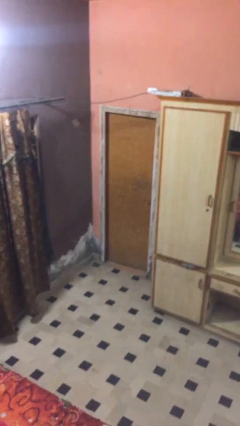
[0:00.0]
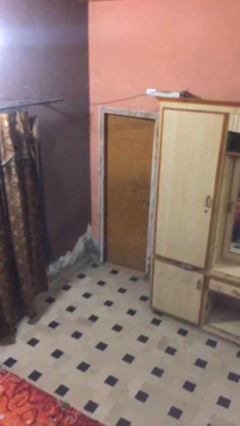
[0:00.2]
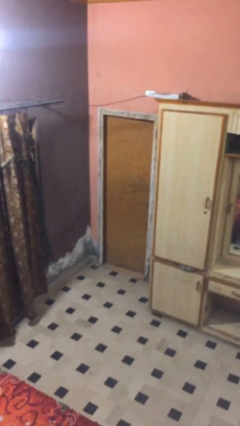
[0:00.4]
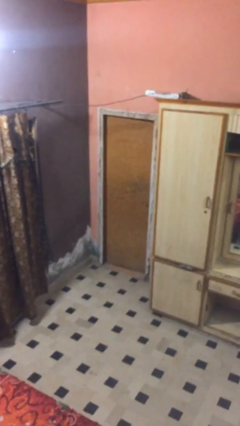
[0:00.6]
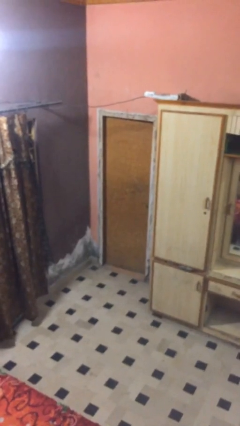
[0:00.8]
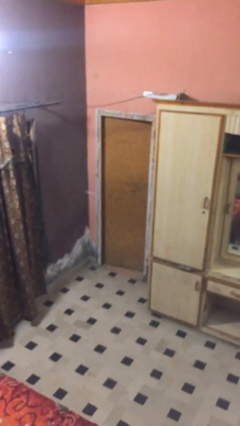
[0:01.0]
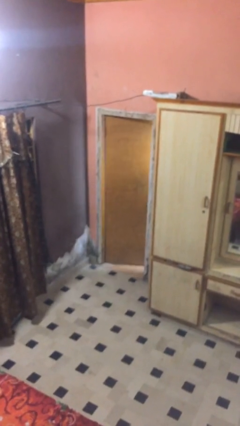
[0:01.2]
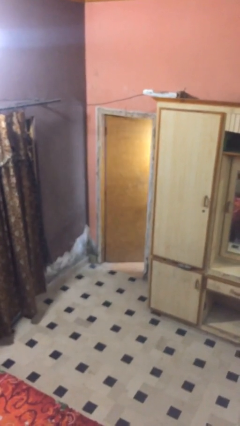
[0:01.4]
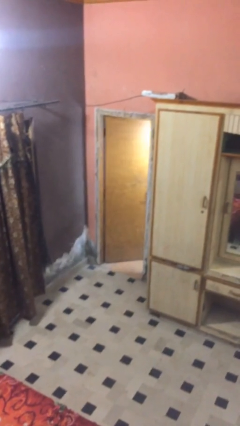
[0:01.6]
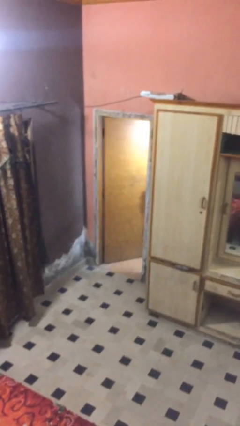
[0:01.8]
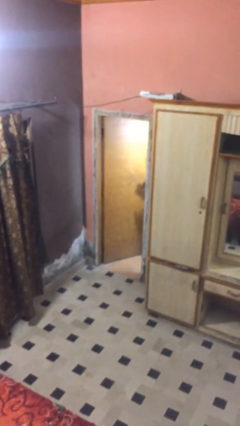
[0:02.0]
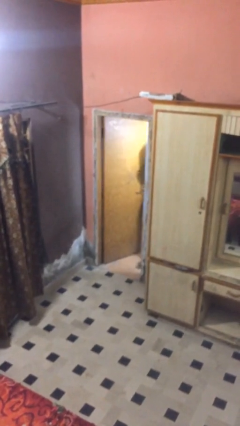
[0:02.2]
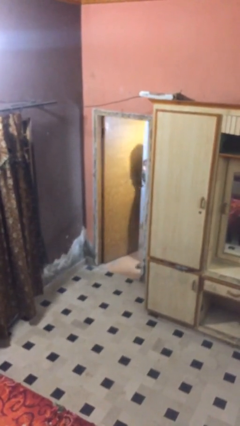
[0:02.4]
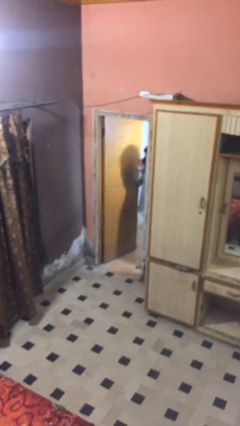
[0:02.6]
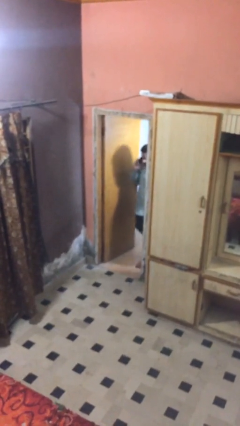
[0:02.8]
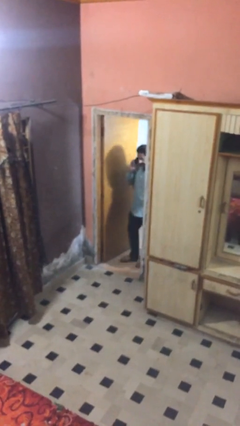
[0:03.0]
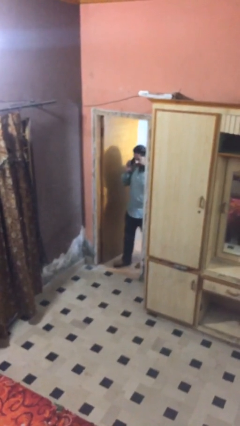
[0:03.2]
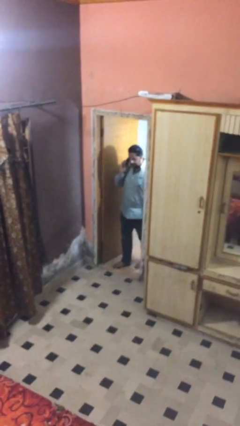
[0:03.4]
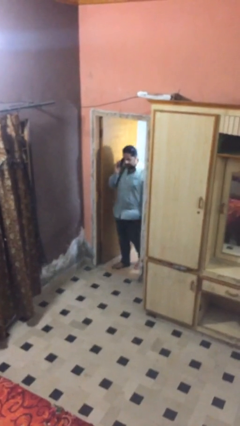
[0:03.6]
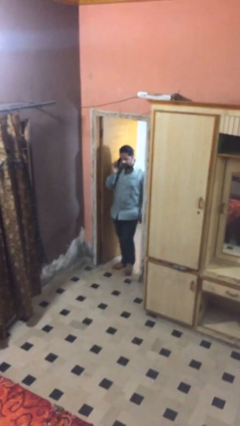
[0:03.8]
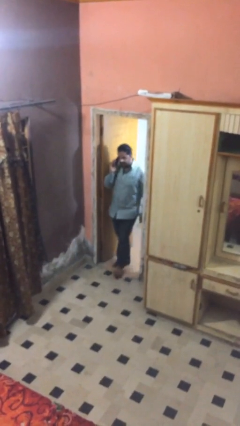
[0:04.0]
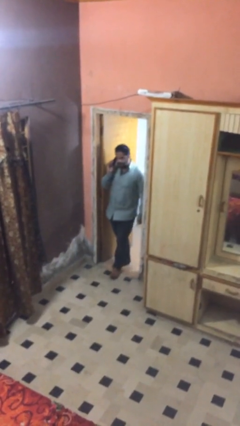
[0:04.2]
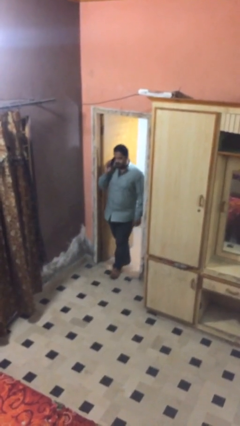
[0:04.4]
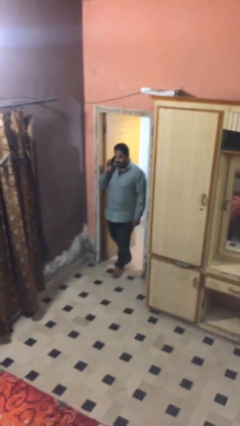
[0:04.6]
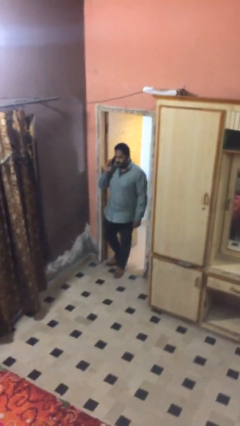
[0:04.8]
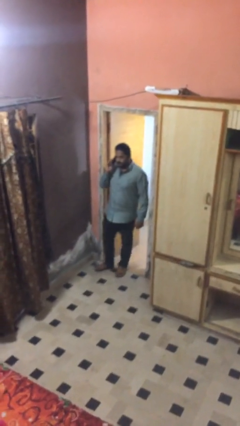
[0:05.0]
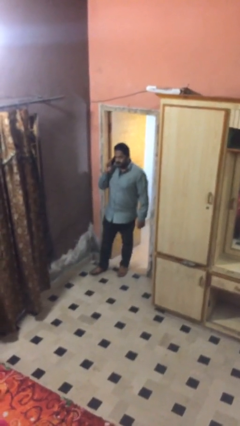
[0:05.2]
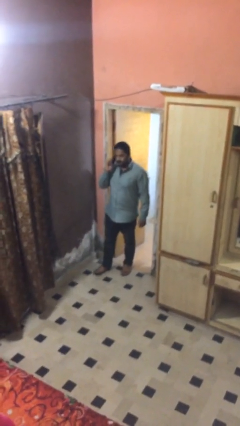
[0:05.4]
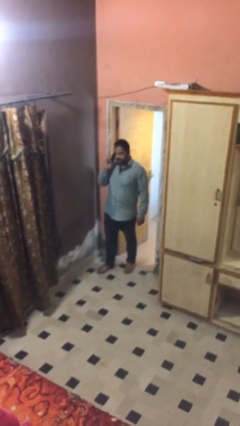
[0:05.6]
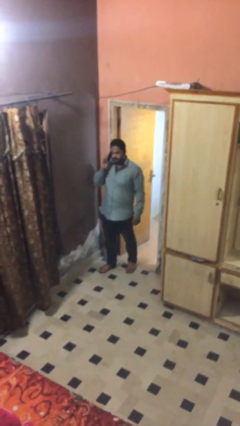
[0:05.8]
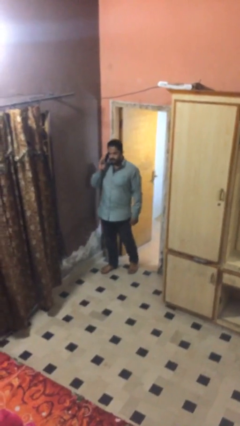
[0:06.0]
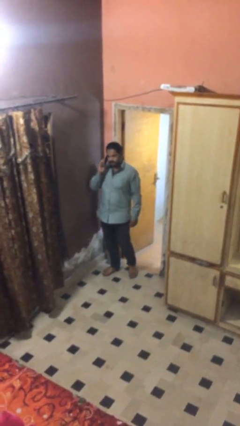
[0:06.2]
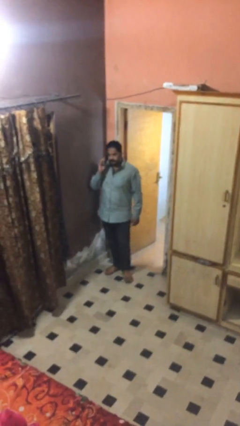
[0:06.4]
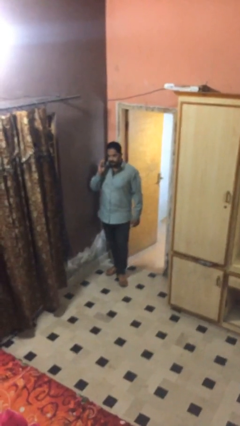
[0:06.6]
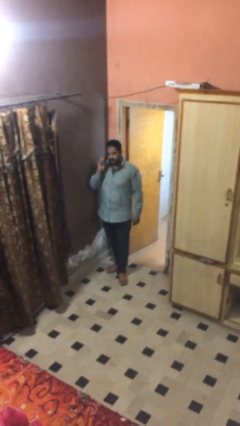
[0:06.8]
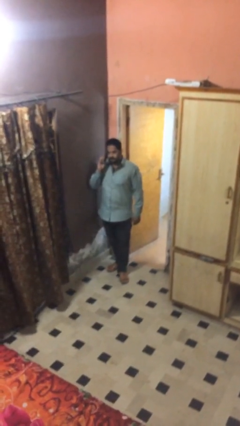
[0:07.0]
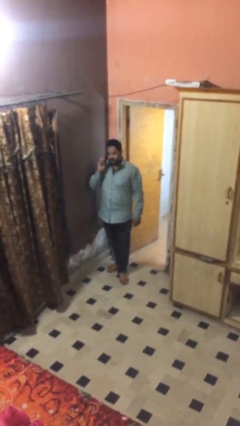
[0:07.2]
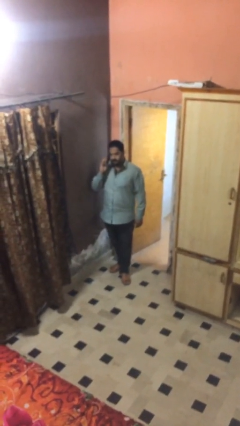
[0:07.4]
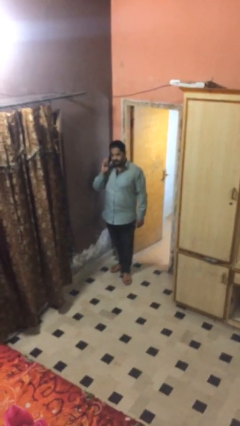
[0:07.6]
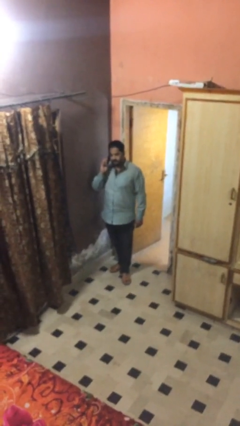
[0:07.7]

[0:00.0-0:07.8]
person enters scene through structure

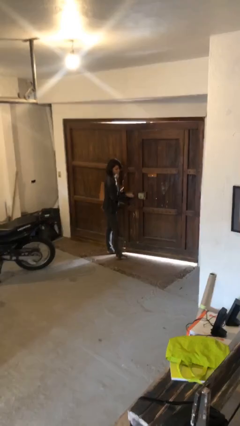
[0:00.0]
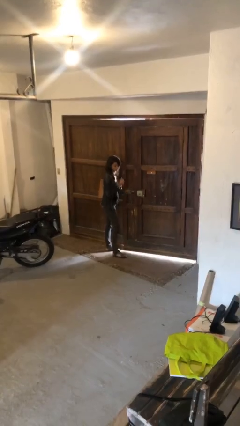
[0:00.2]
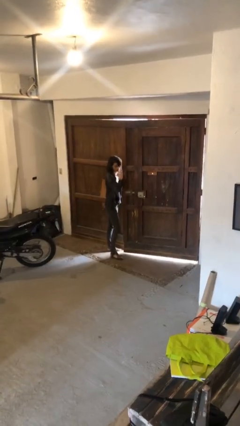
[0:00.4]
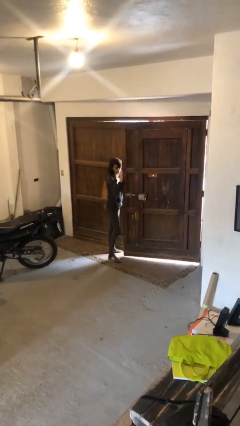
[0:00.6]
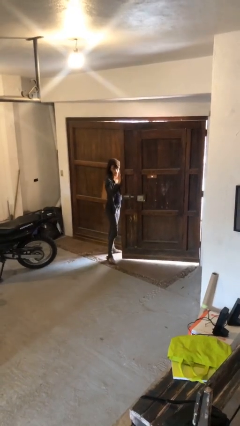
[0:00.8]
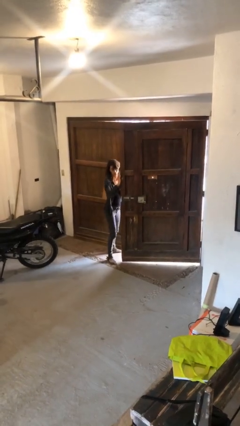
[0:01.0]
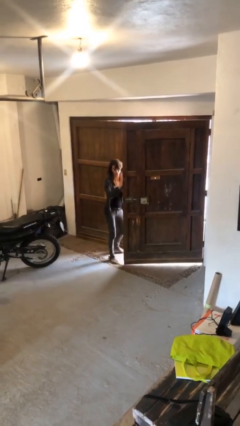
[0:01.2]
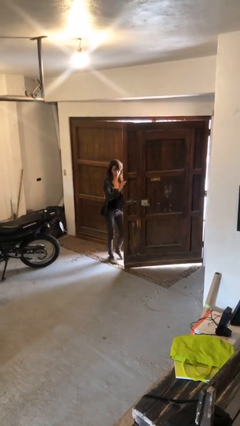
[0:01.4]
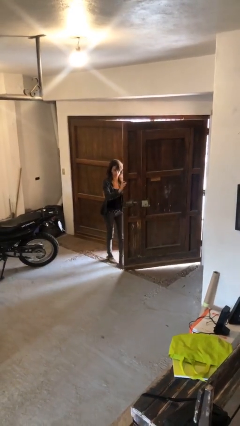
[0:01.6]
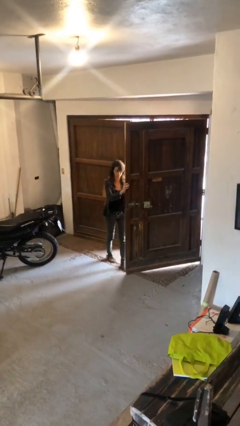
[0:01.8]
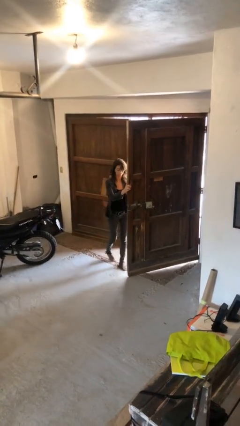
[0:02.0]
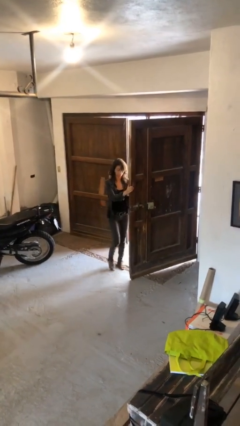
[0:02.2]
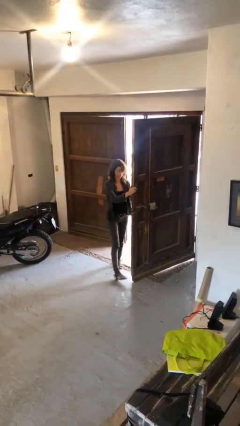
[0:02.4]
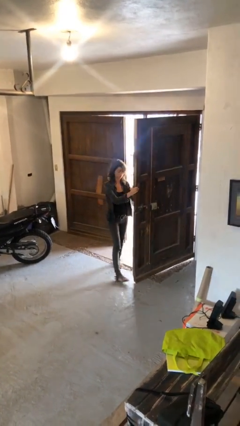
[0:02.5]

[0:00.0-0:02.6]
person opens gate

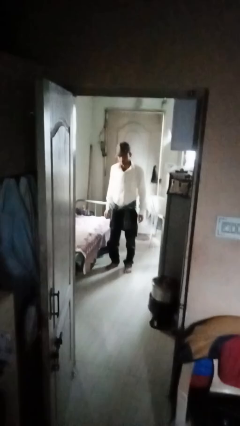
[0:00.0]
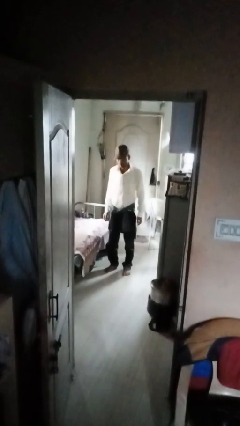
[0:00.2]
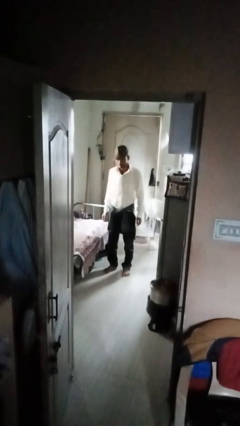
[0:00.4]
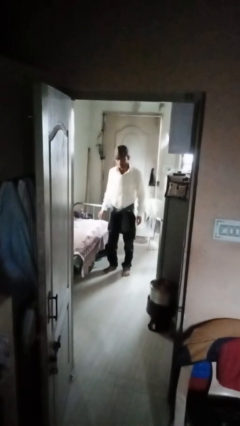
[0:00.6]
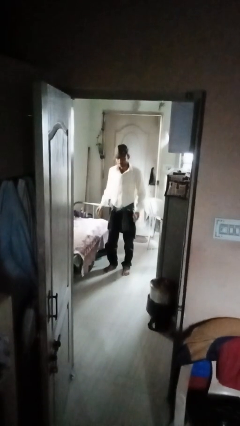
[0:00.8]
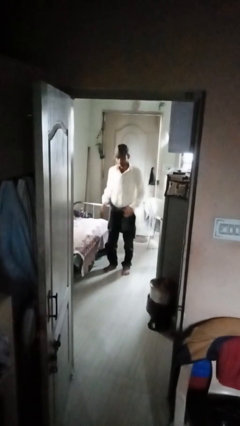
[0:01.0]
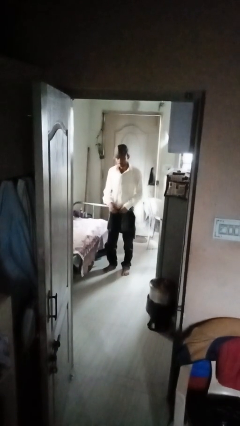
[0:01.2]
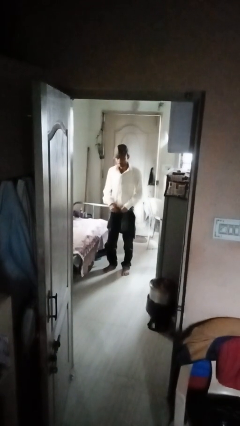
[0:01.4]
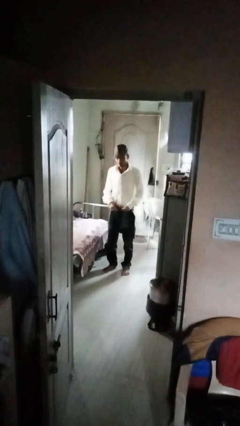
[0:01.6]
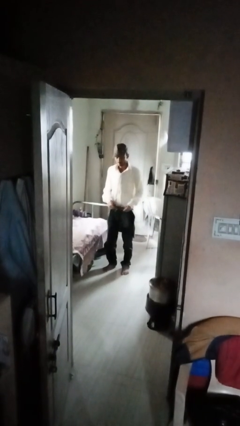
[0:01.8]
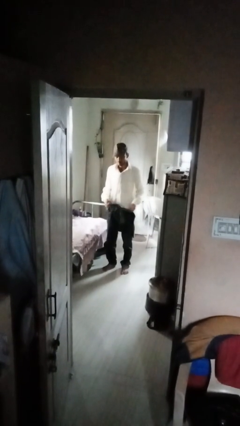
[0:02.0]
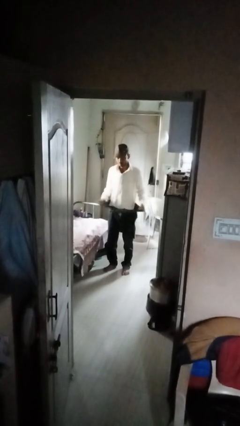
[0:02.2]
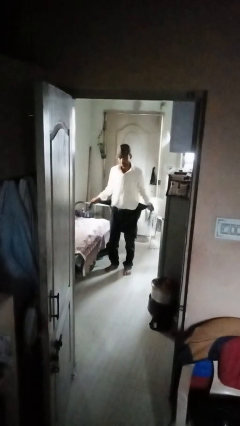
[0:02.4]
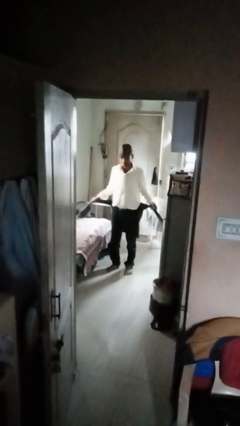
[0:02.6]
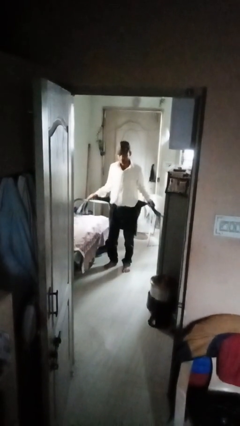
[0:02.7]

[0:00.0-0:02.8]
person unties jacket around waist

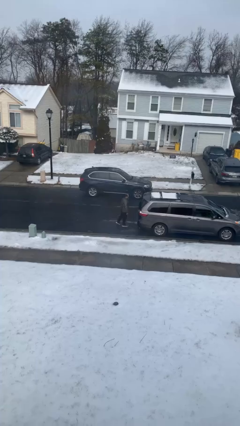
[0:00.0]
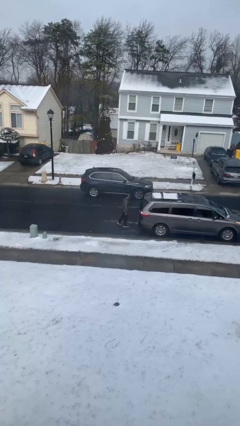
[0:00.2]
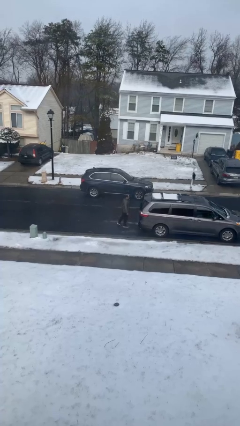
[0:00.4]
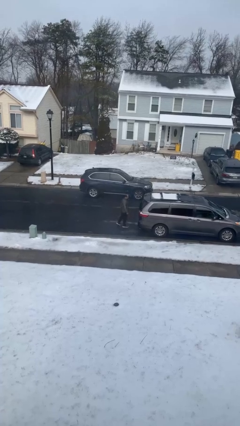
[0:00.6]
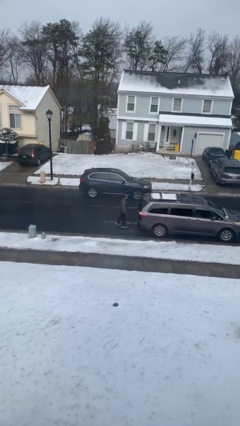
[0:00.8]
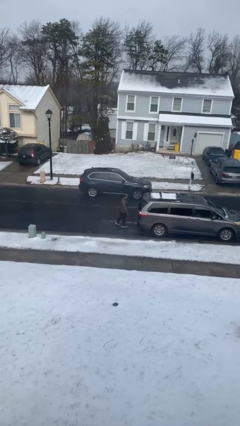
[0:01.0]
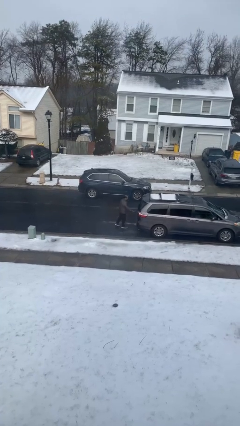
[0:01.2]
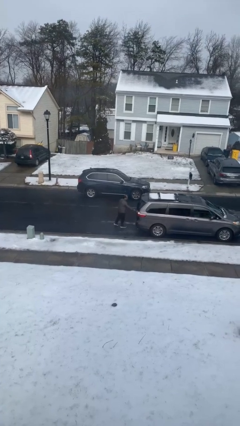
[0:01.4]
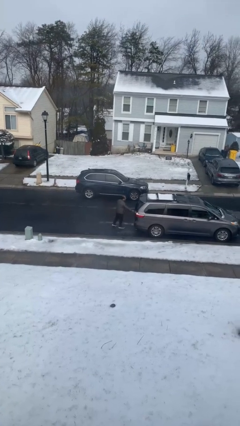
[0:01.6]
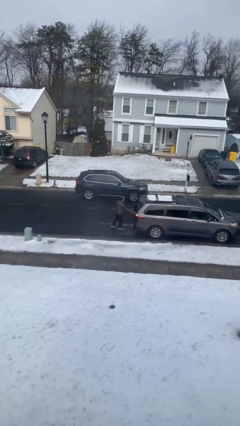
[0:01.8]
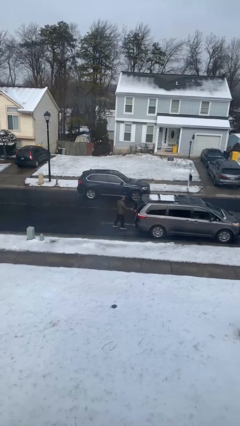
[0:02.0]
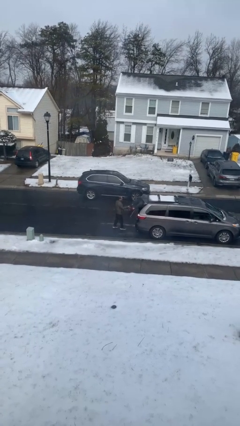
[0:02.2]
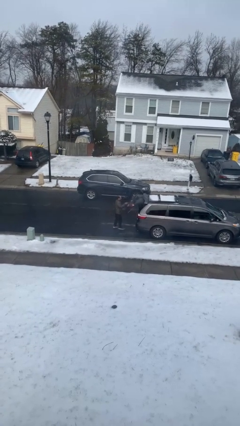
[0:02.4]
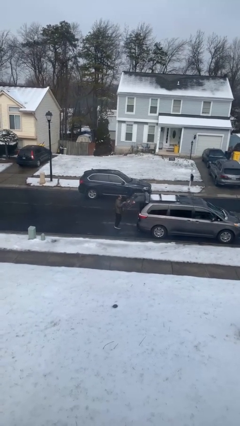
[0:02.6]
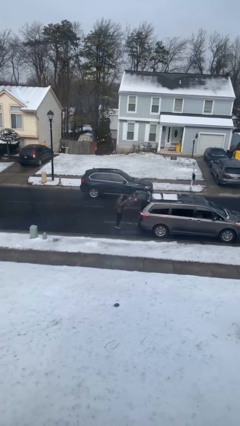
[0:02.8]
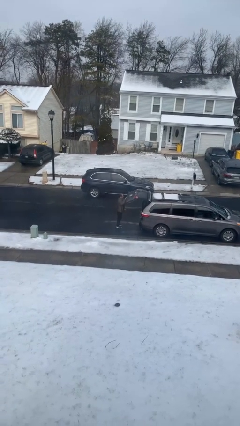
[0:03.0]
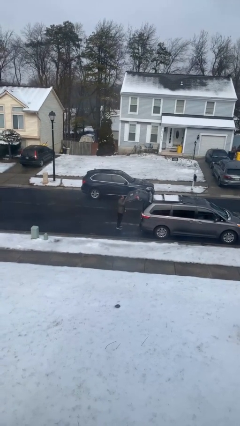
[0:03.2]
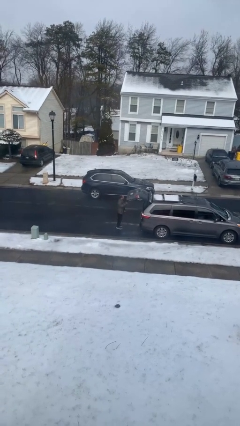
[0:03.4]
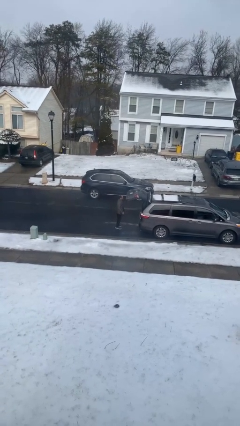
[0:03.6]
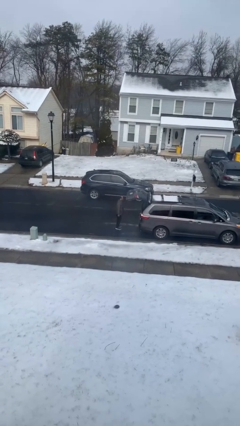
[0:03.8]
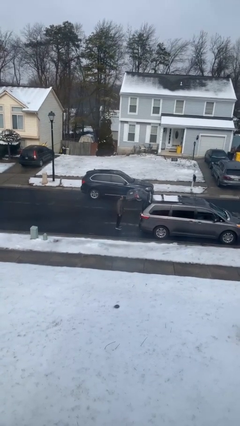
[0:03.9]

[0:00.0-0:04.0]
person opens car trunk

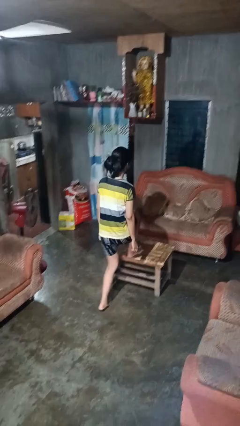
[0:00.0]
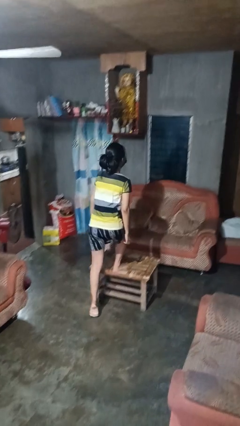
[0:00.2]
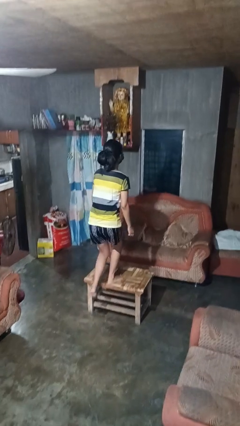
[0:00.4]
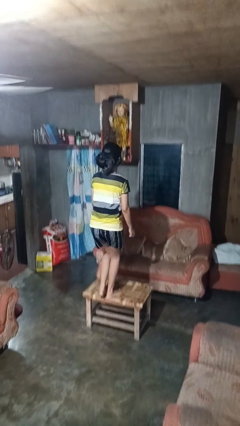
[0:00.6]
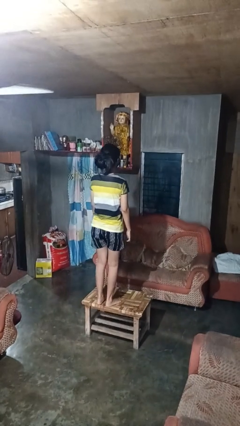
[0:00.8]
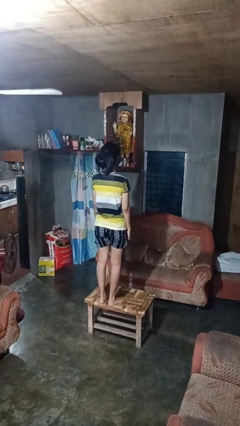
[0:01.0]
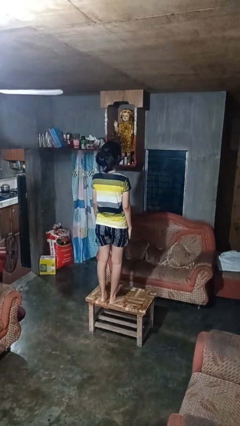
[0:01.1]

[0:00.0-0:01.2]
person climbs on table
